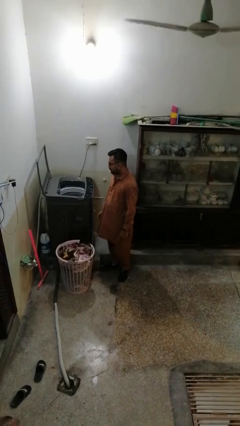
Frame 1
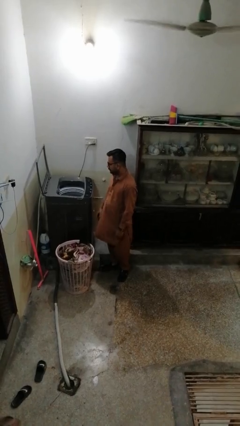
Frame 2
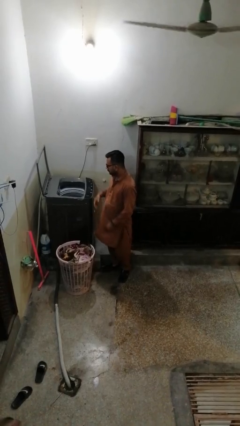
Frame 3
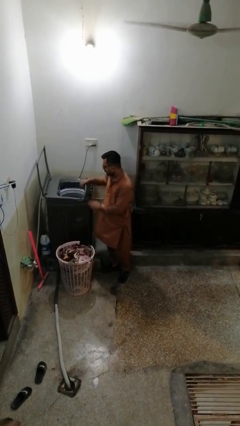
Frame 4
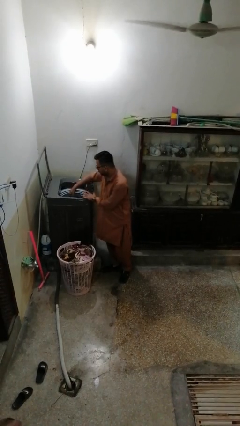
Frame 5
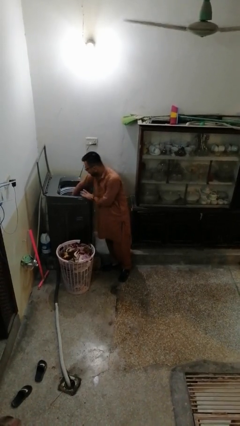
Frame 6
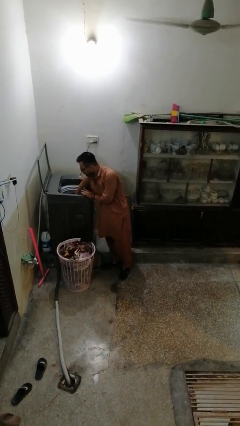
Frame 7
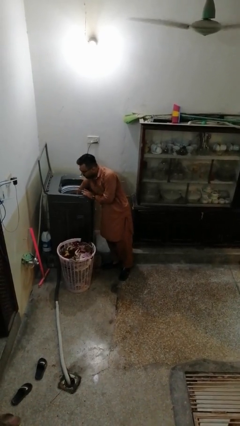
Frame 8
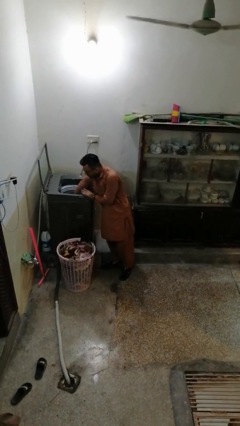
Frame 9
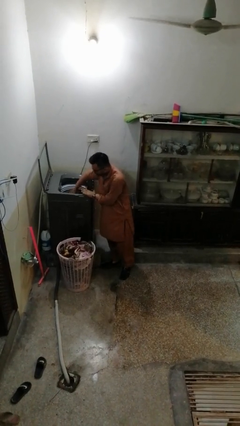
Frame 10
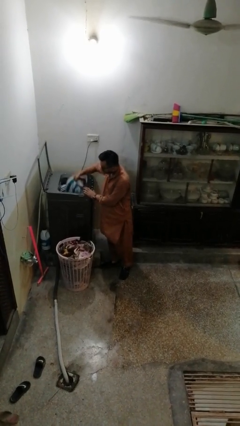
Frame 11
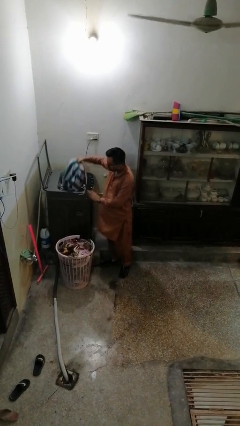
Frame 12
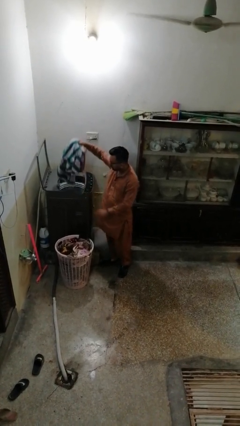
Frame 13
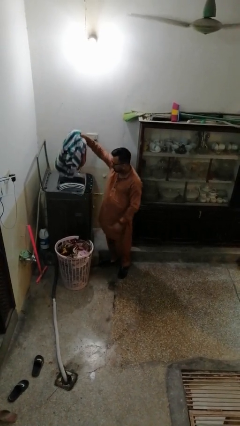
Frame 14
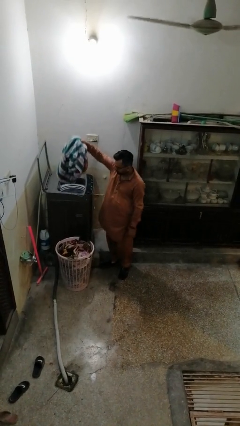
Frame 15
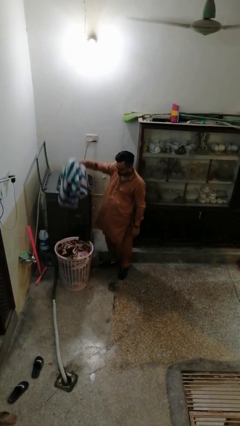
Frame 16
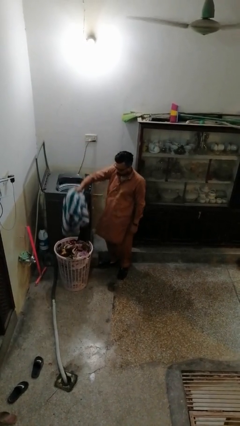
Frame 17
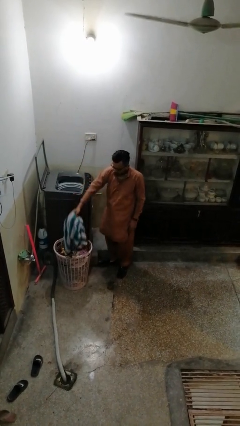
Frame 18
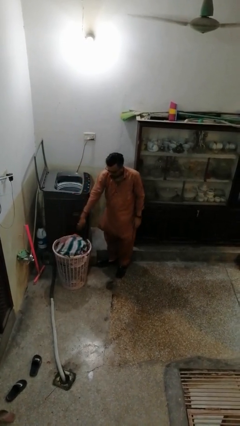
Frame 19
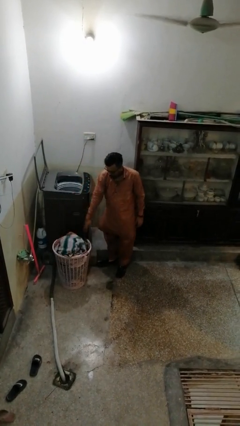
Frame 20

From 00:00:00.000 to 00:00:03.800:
person unloads clotheswasher

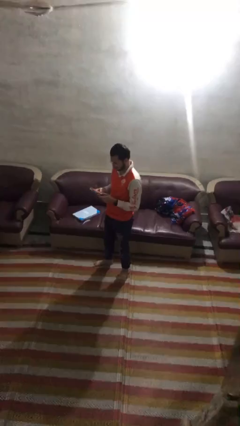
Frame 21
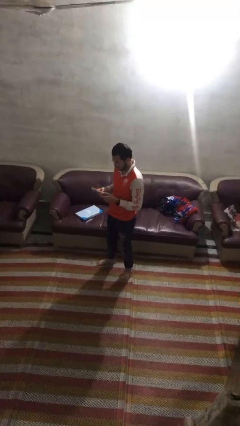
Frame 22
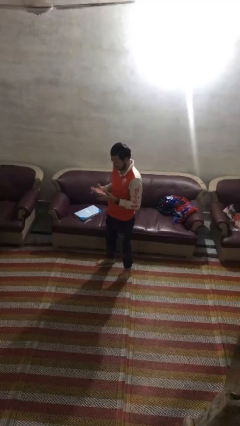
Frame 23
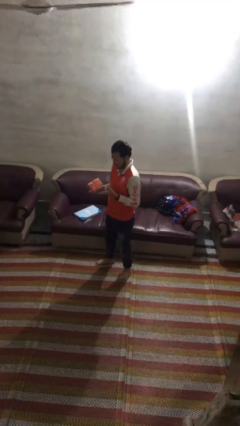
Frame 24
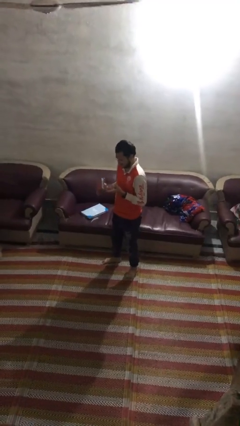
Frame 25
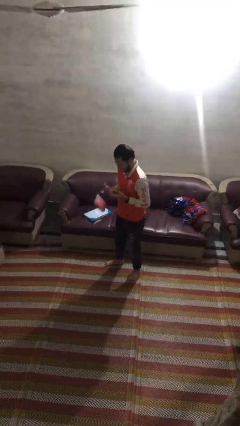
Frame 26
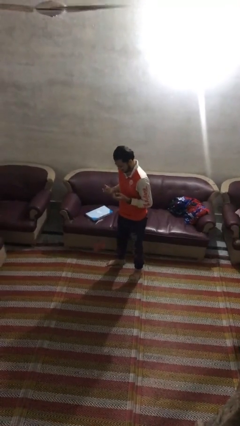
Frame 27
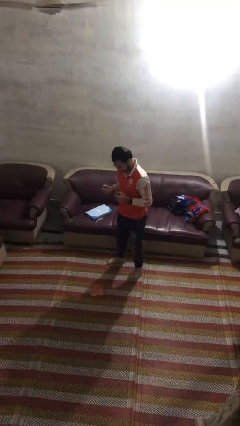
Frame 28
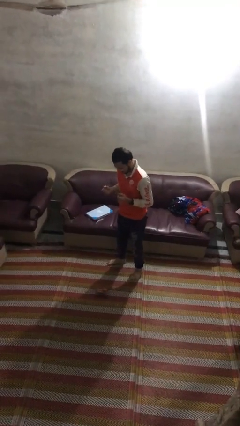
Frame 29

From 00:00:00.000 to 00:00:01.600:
person drops object

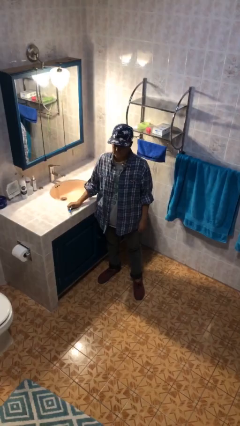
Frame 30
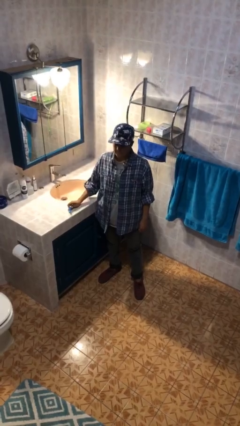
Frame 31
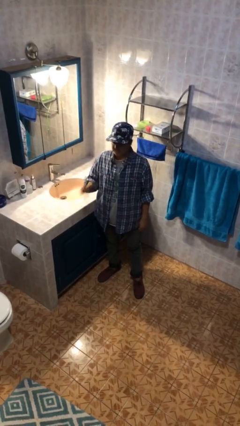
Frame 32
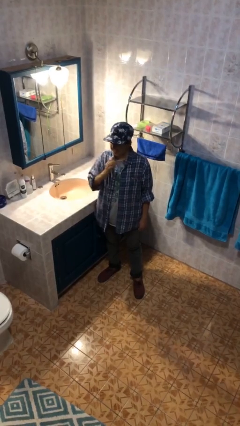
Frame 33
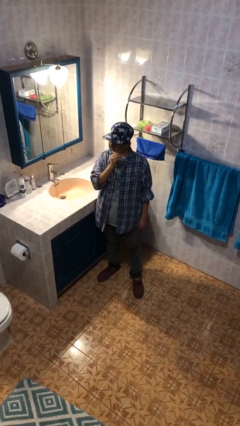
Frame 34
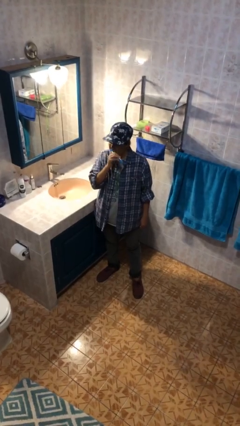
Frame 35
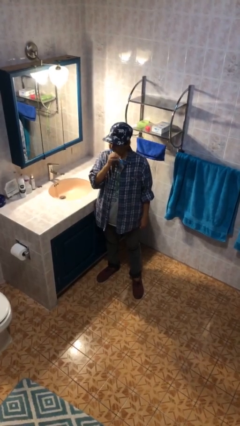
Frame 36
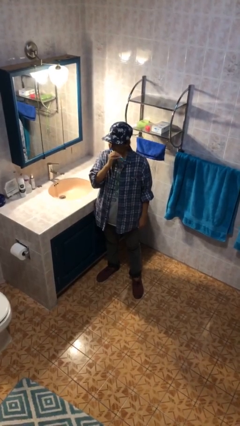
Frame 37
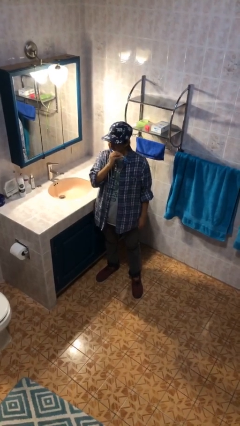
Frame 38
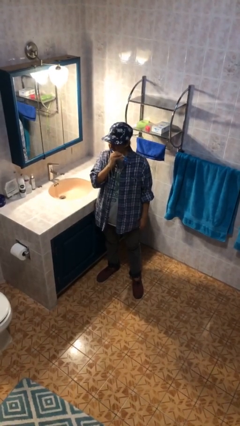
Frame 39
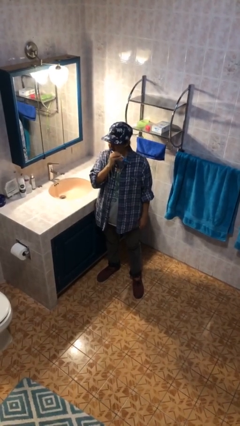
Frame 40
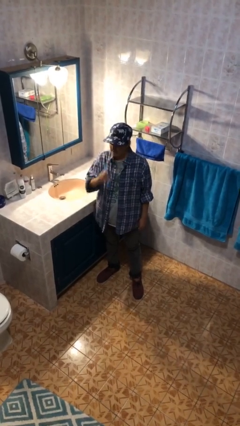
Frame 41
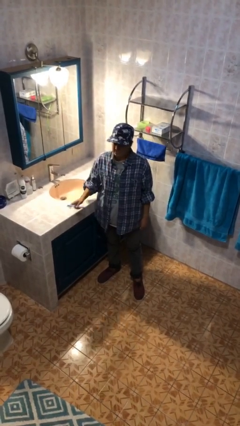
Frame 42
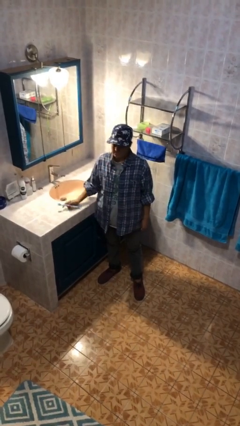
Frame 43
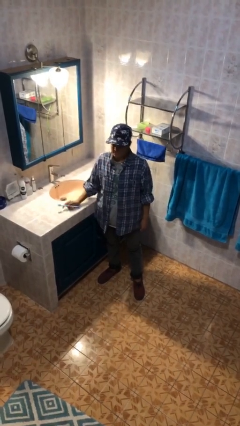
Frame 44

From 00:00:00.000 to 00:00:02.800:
person brushes teeth

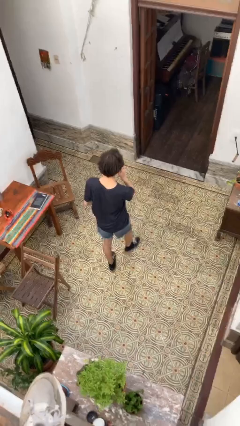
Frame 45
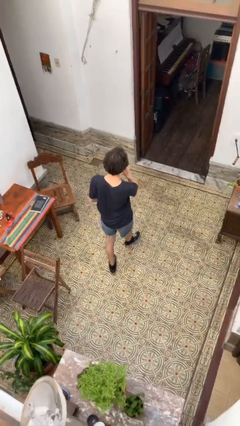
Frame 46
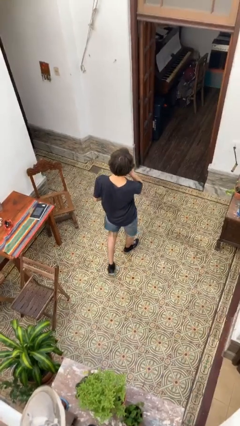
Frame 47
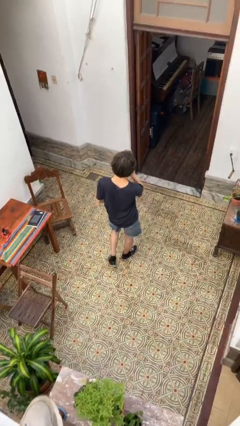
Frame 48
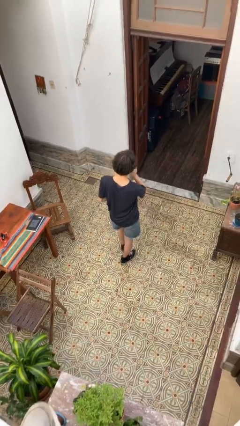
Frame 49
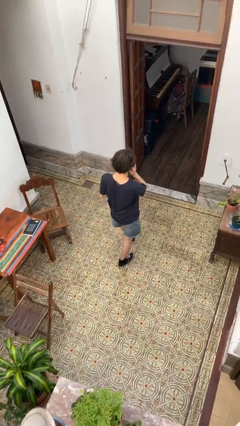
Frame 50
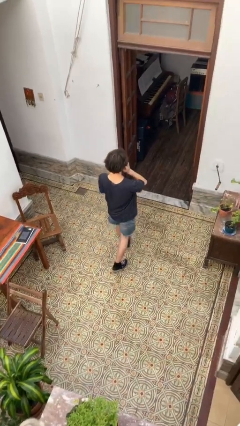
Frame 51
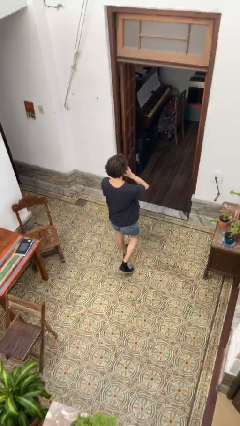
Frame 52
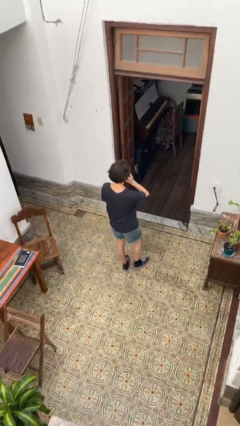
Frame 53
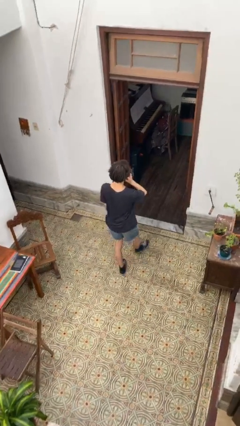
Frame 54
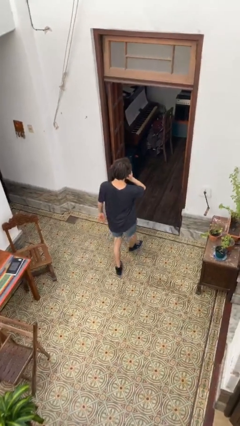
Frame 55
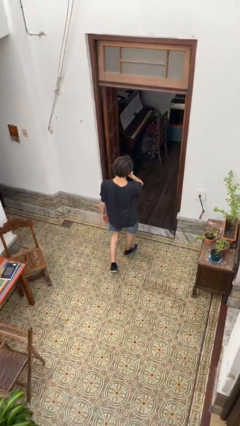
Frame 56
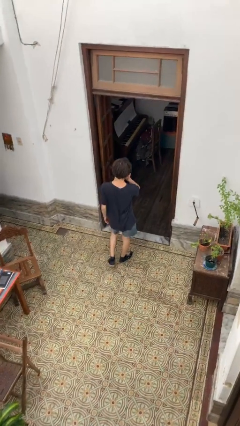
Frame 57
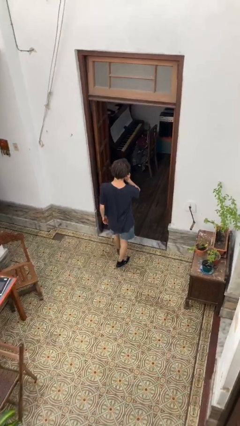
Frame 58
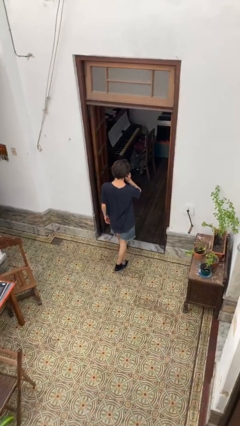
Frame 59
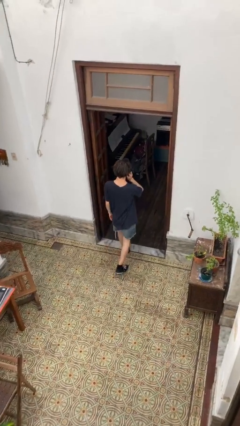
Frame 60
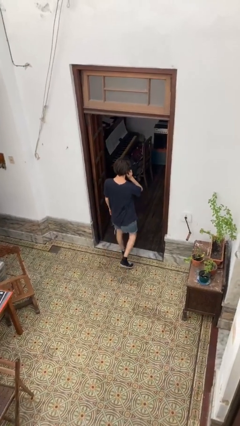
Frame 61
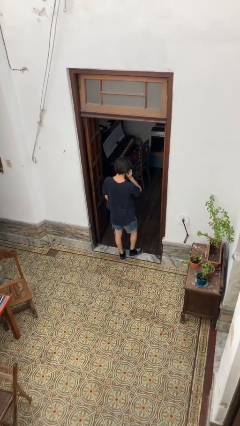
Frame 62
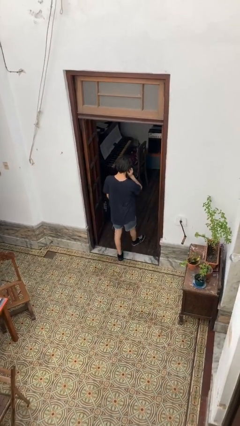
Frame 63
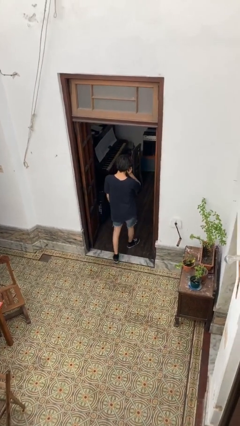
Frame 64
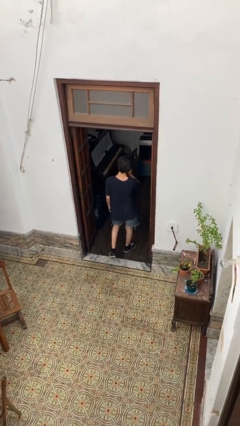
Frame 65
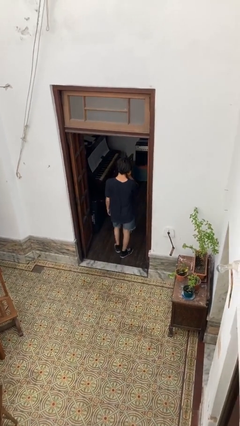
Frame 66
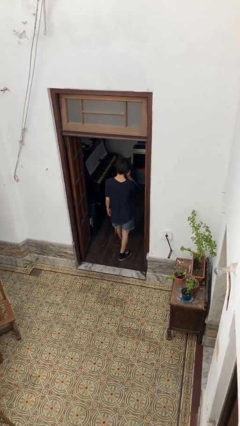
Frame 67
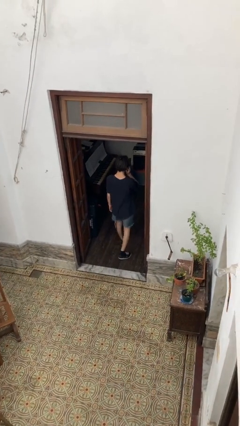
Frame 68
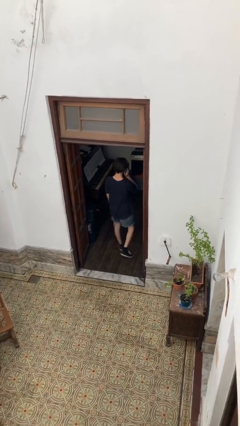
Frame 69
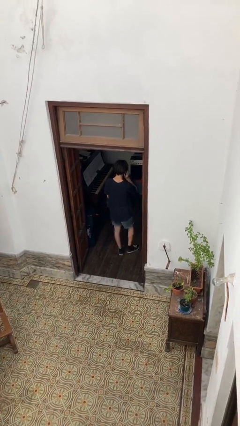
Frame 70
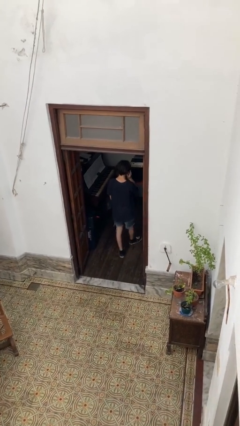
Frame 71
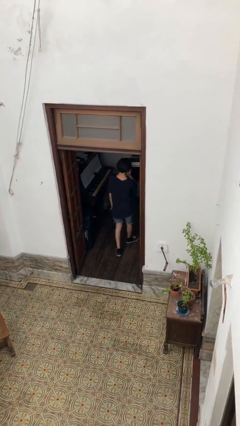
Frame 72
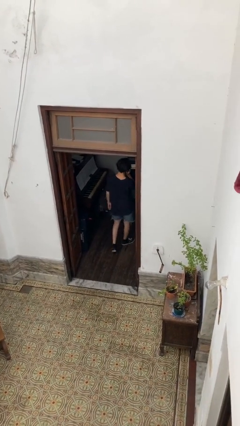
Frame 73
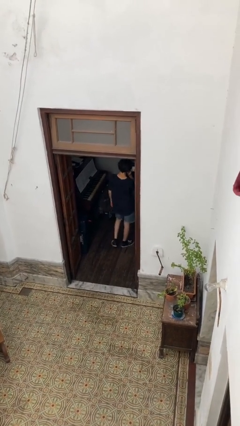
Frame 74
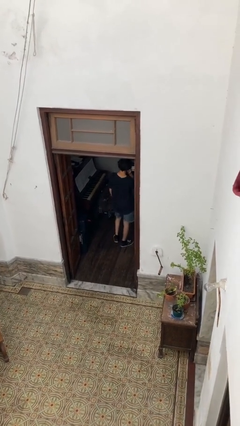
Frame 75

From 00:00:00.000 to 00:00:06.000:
person exits scene through structure

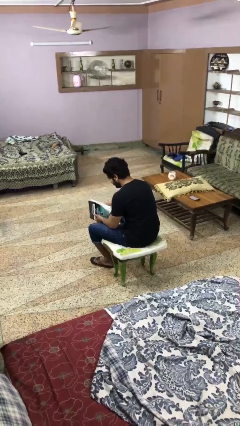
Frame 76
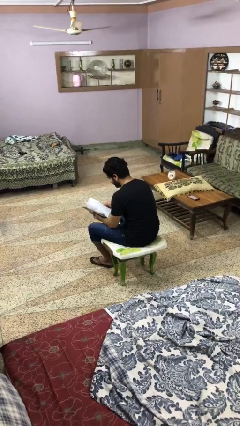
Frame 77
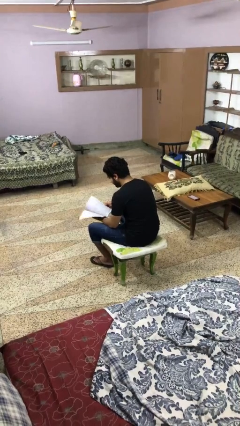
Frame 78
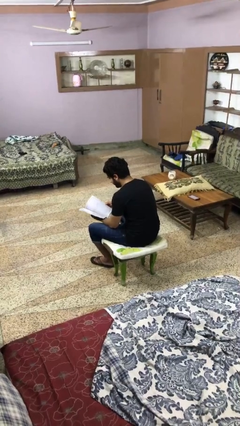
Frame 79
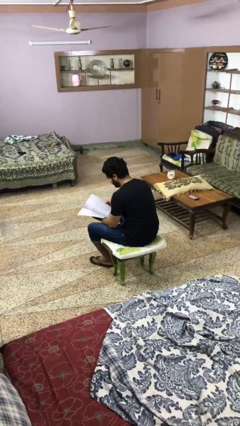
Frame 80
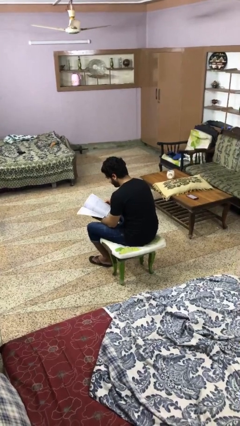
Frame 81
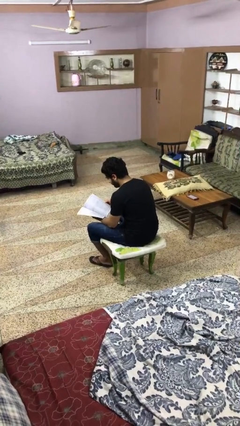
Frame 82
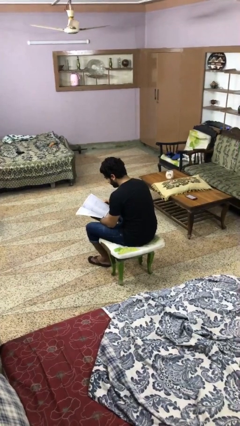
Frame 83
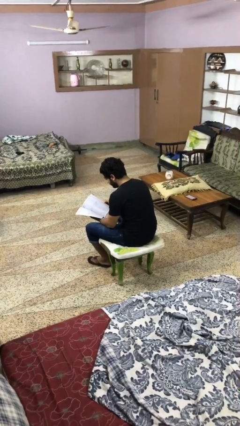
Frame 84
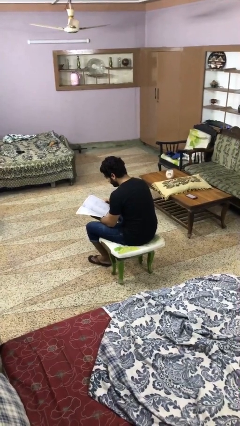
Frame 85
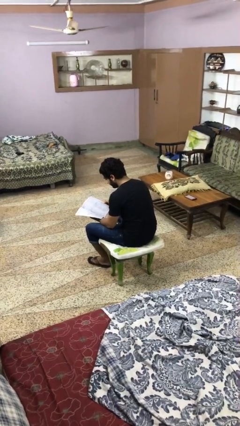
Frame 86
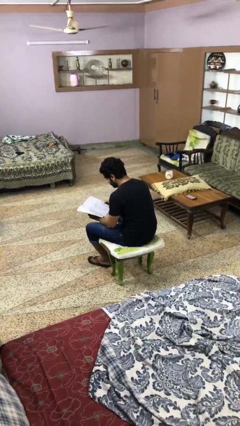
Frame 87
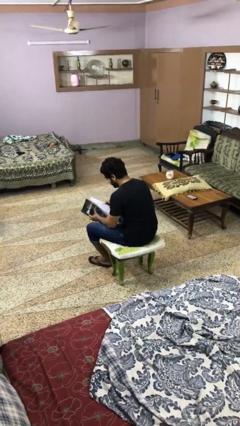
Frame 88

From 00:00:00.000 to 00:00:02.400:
person reads book

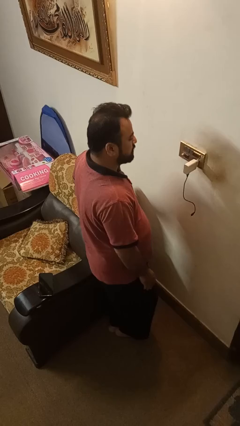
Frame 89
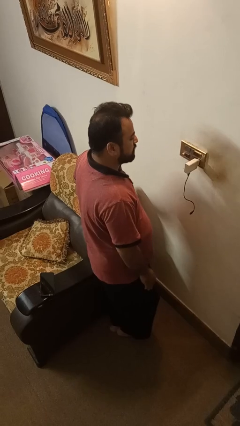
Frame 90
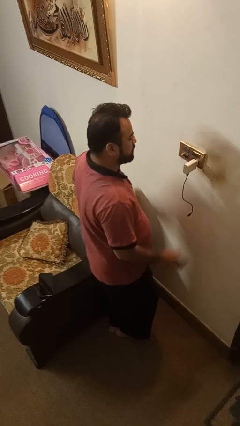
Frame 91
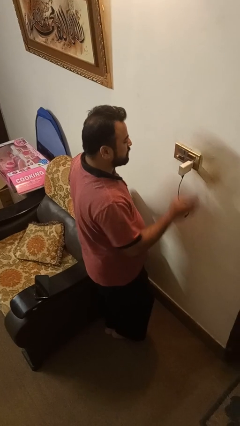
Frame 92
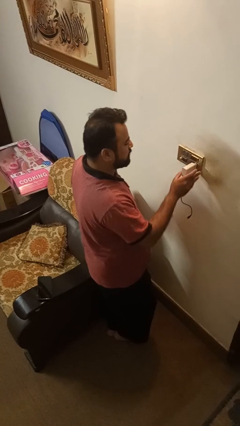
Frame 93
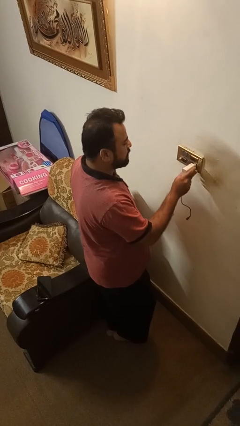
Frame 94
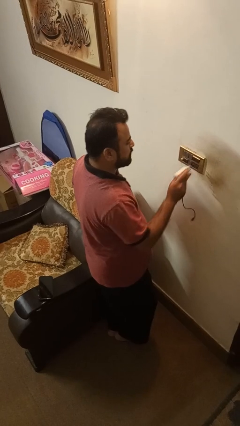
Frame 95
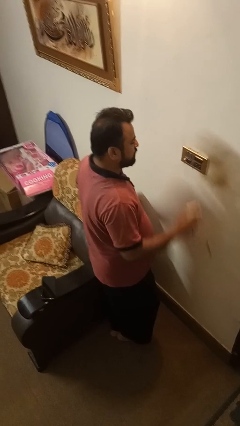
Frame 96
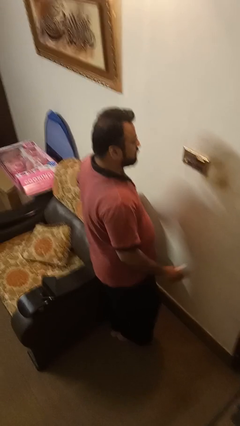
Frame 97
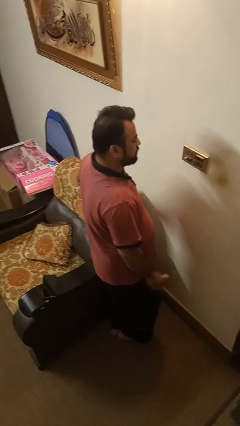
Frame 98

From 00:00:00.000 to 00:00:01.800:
person unplugs from electrical socket
